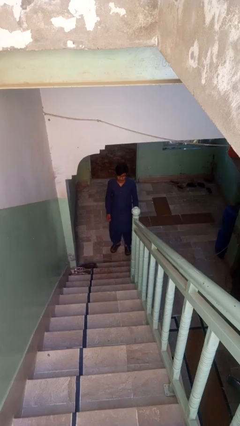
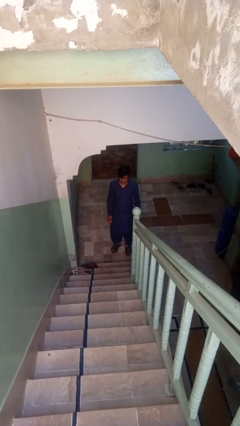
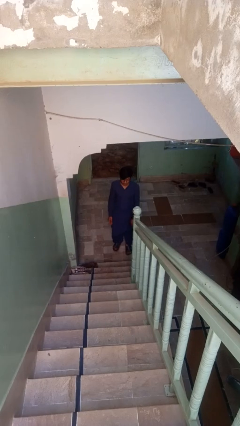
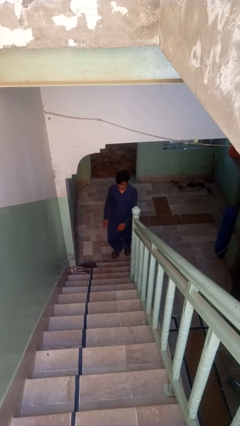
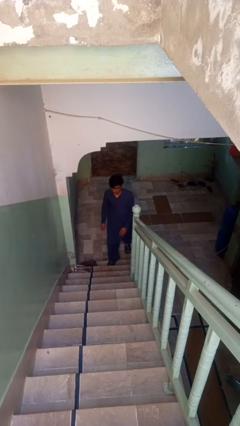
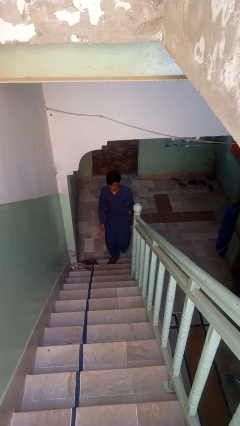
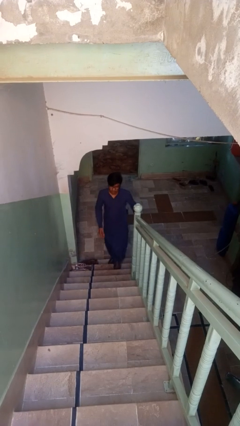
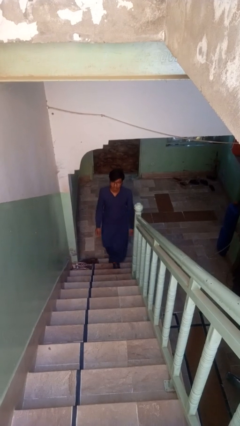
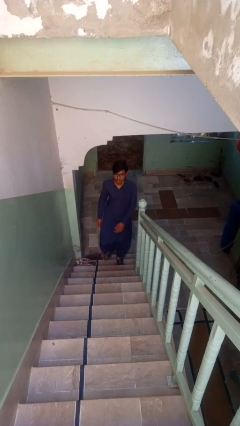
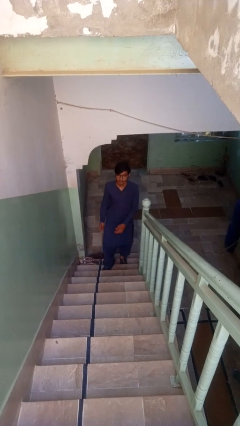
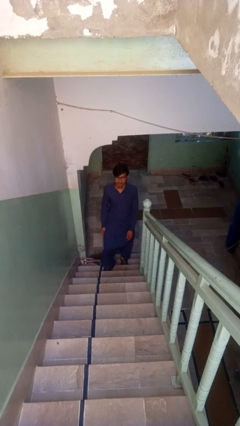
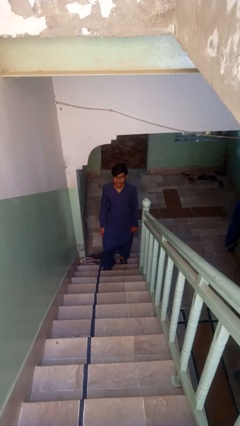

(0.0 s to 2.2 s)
person climbs up stairs

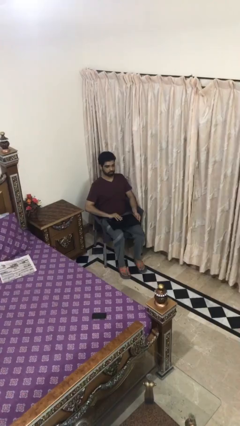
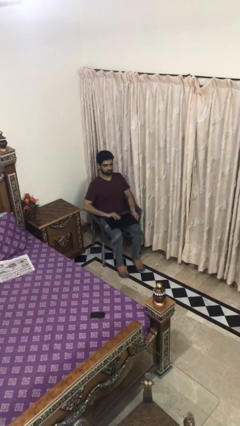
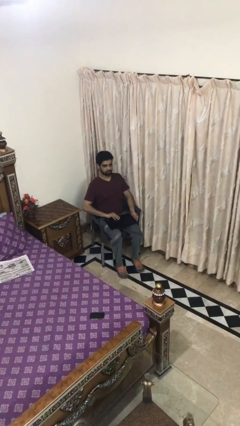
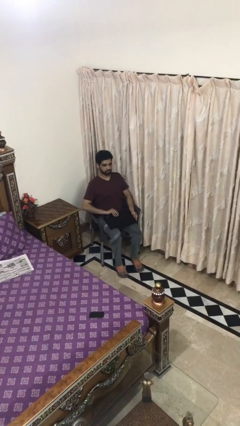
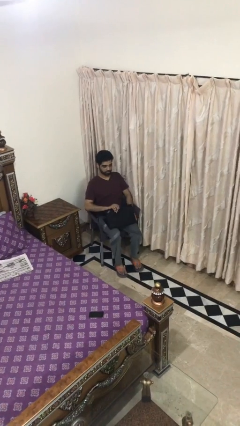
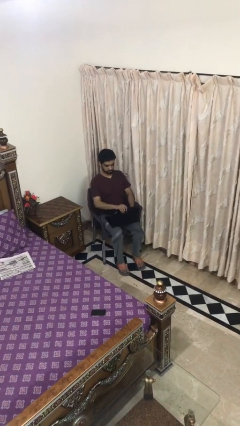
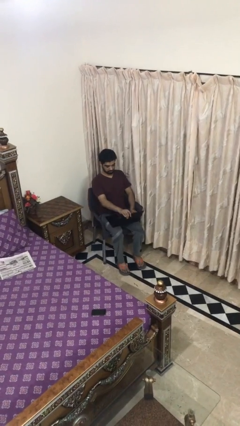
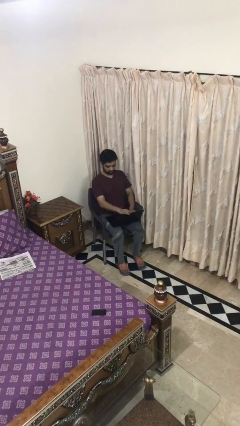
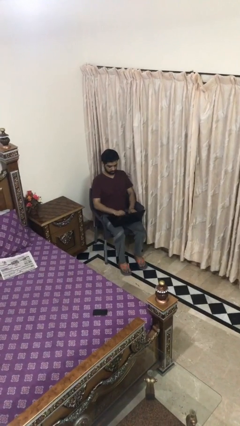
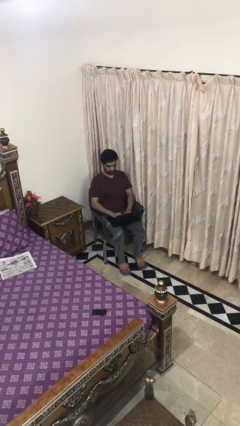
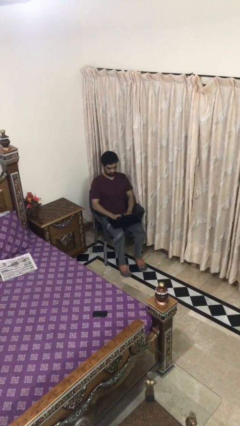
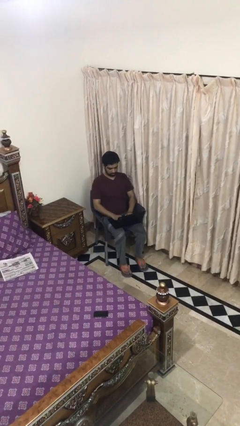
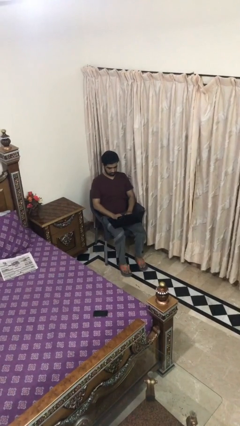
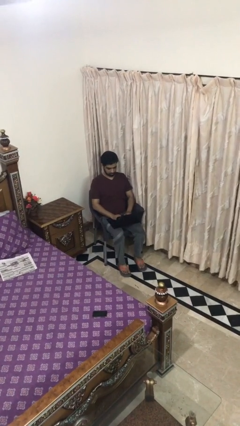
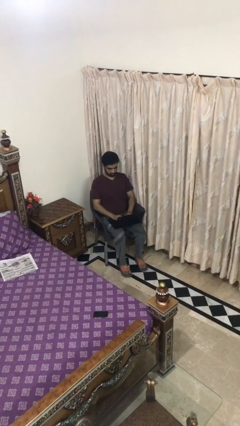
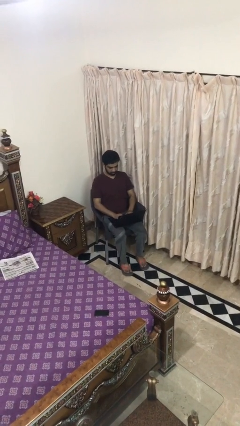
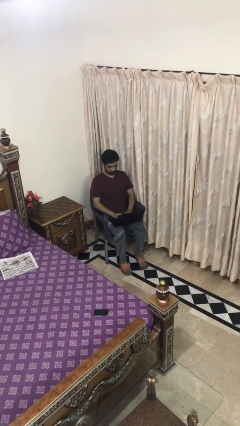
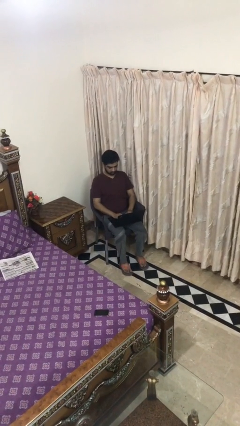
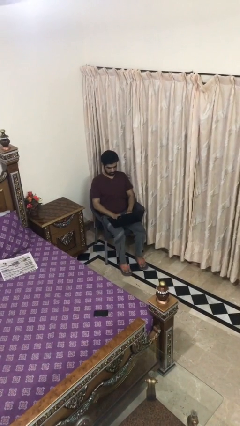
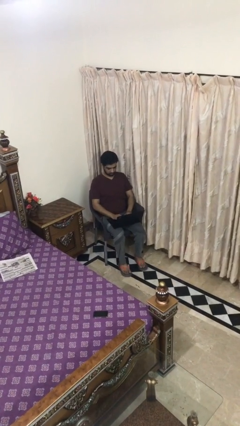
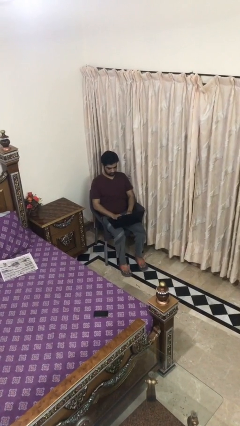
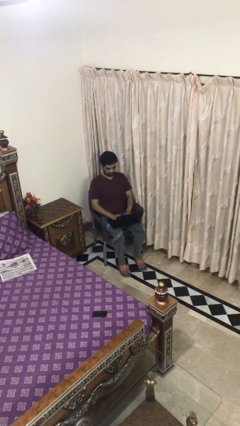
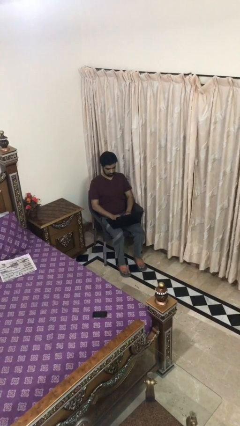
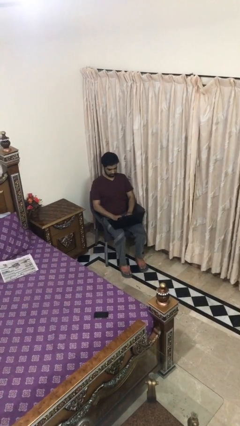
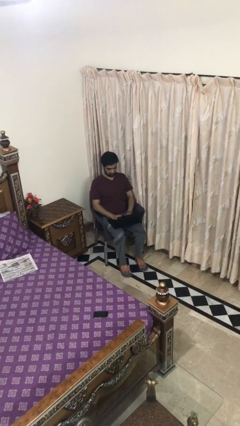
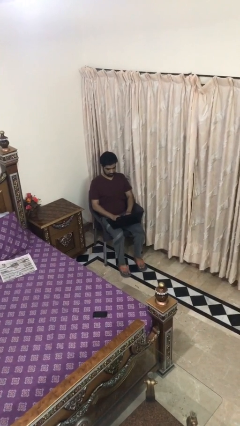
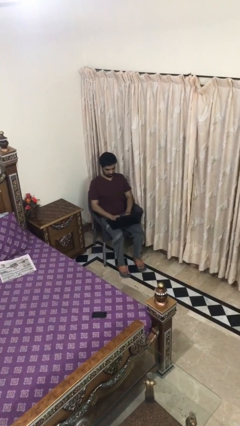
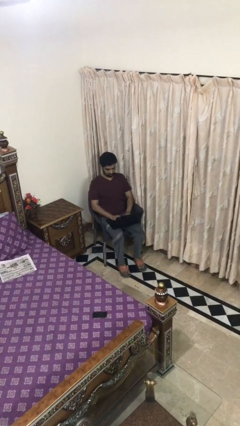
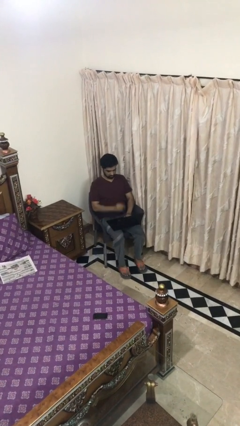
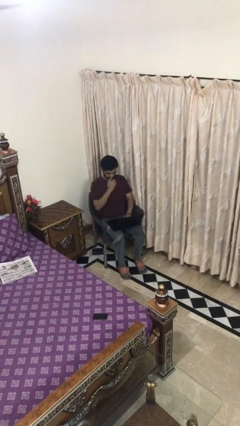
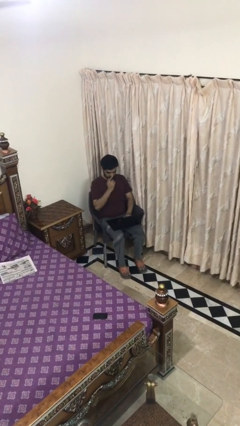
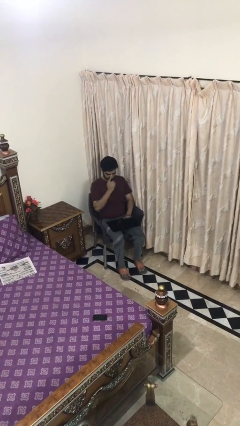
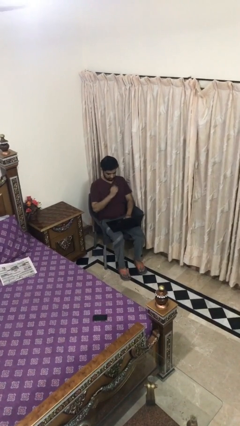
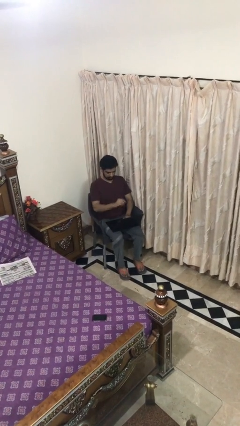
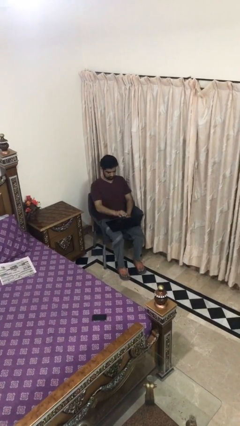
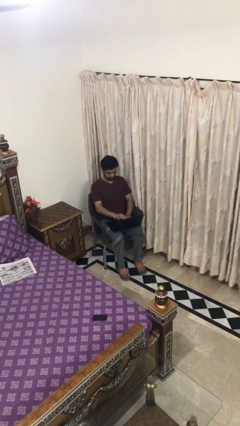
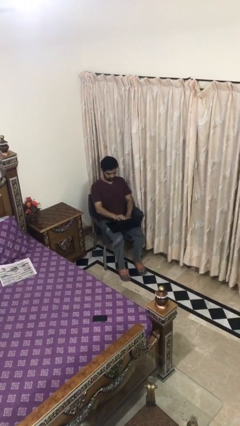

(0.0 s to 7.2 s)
person interacts with laptop

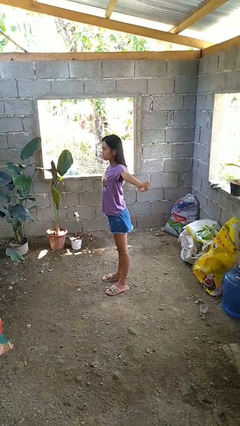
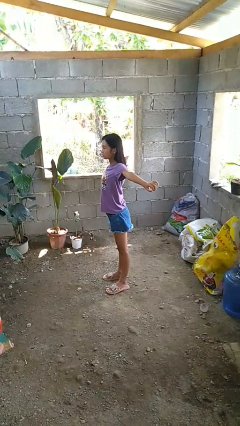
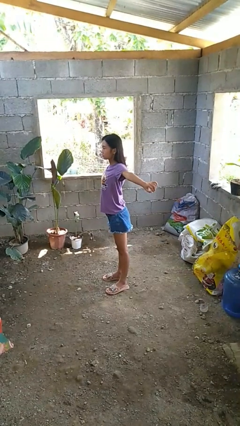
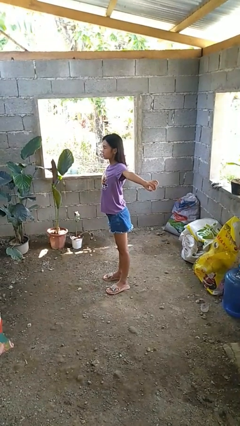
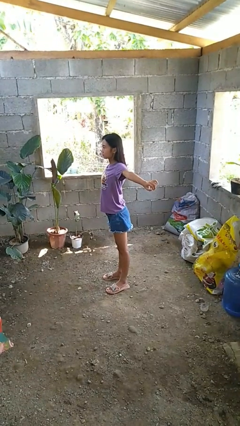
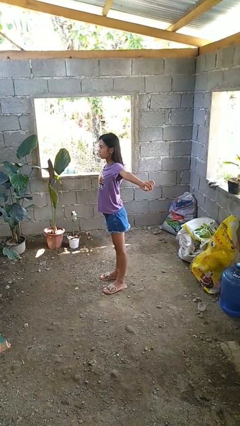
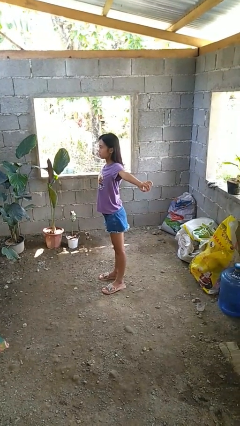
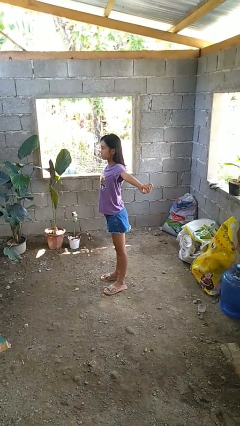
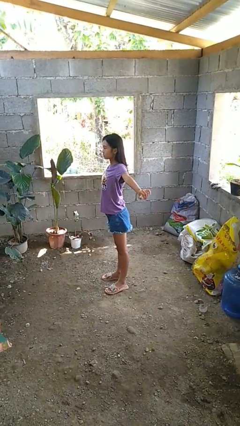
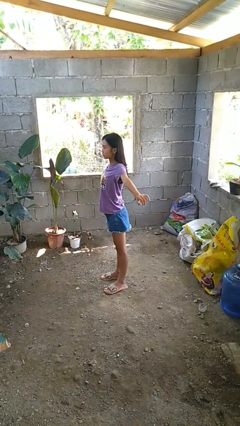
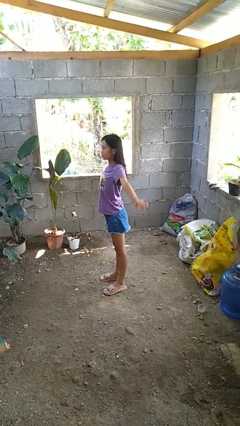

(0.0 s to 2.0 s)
person stretches arms to side

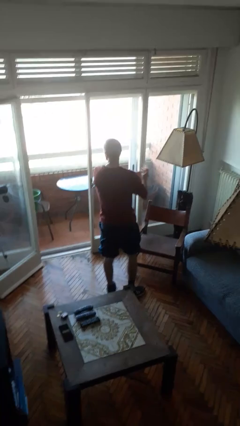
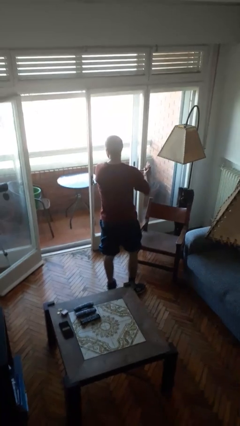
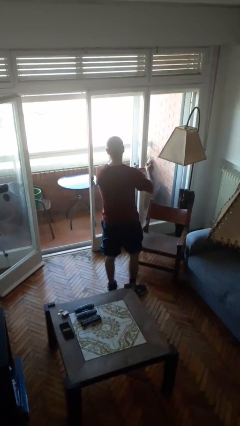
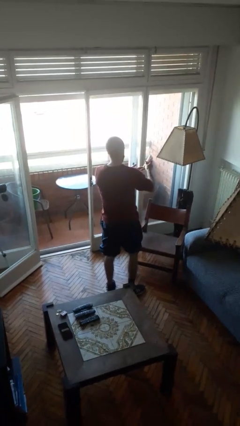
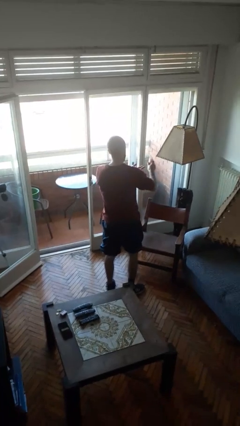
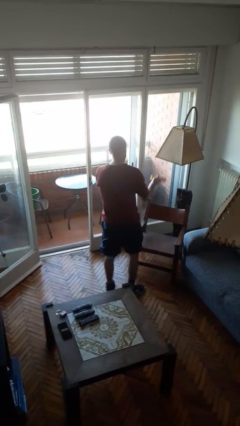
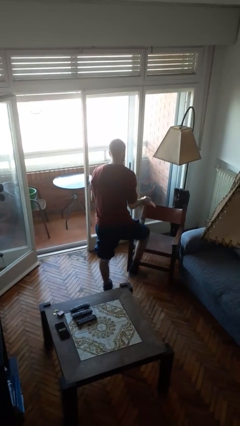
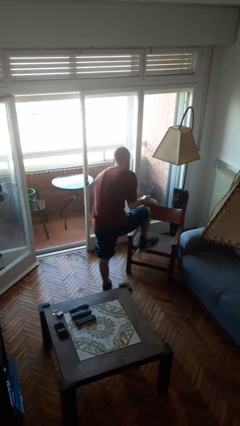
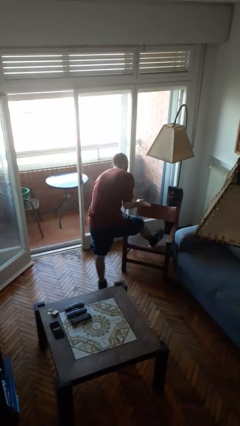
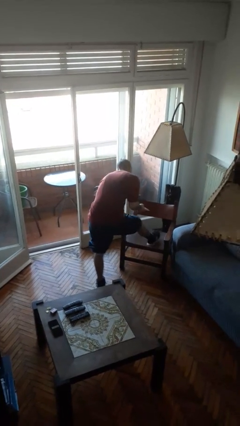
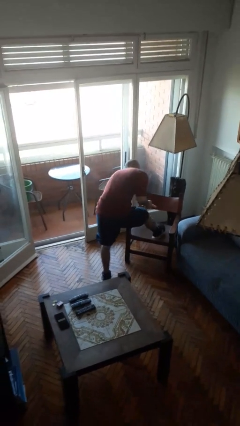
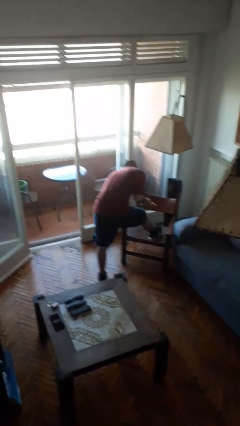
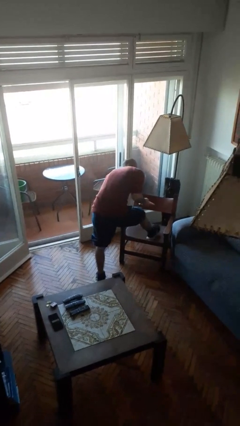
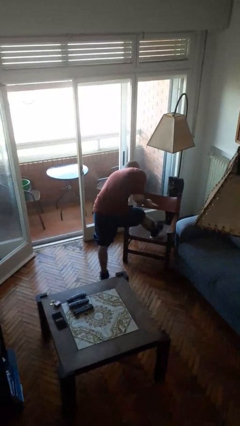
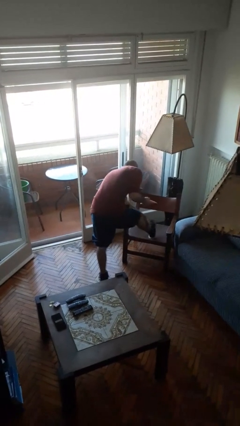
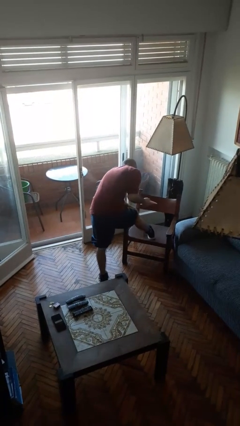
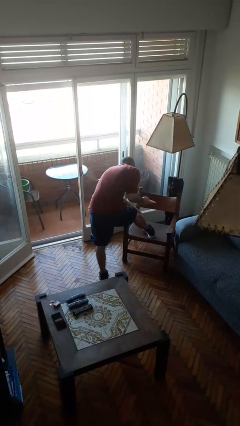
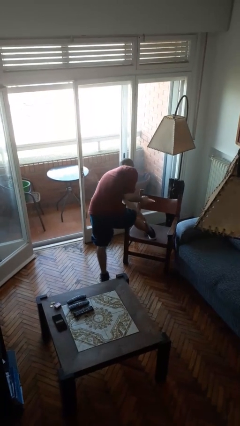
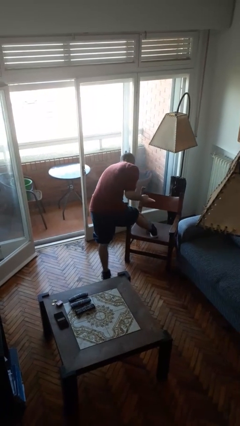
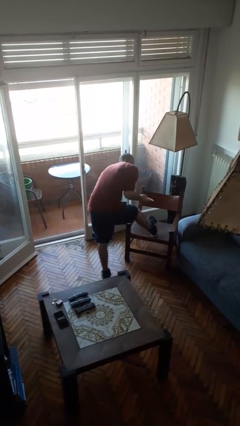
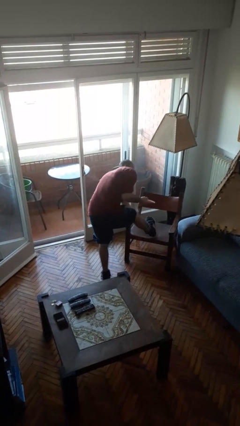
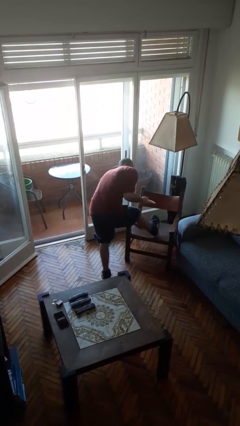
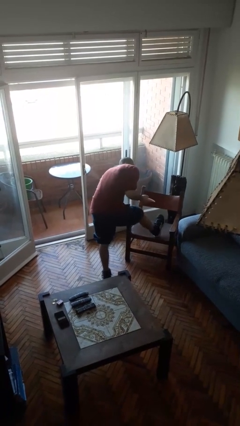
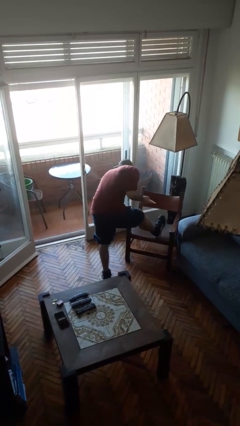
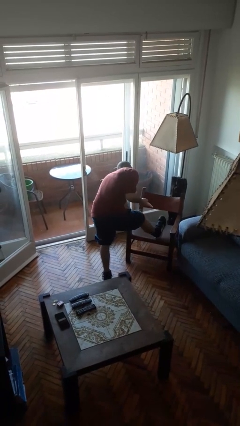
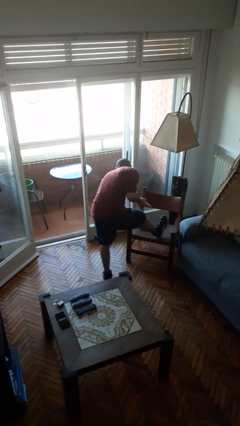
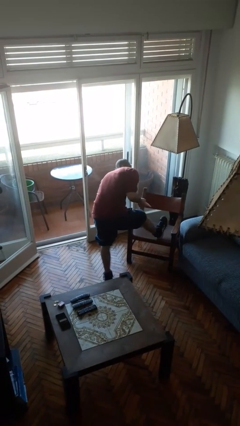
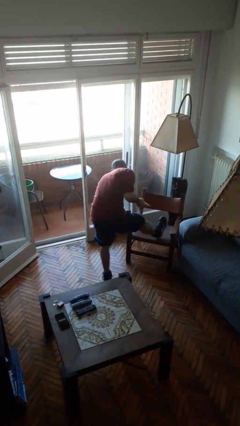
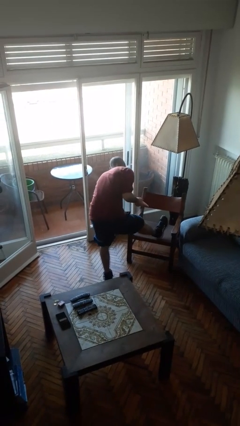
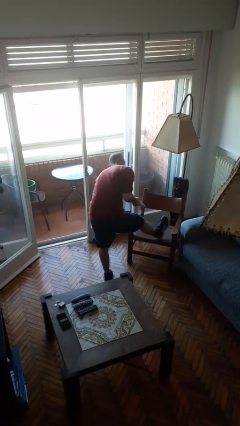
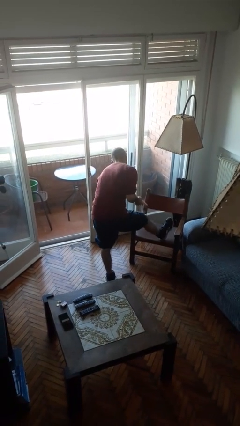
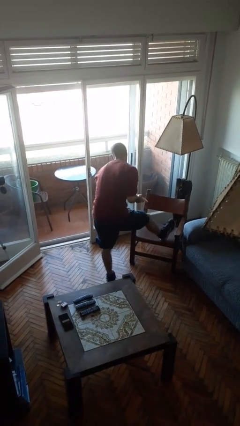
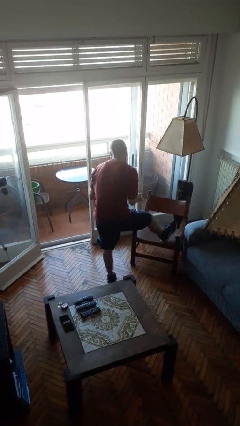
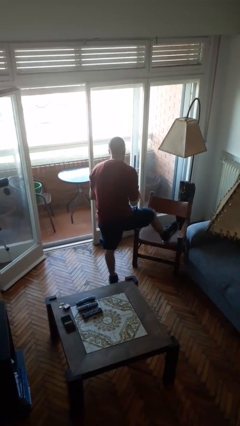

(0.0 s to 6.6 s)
person applies sunscreen

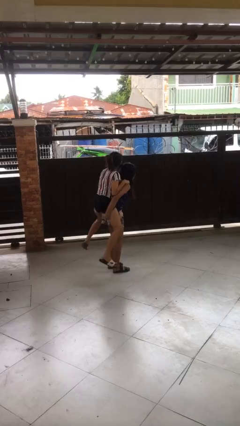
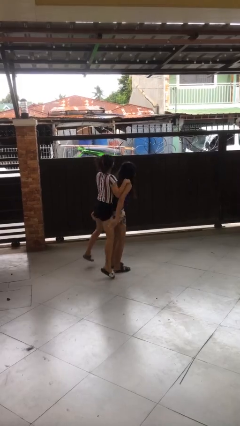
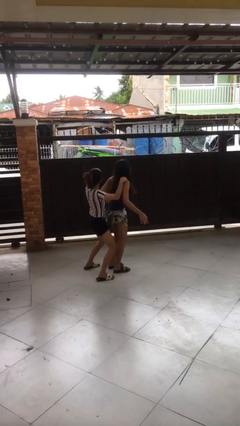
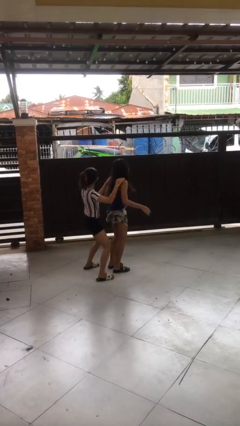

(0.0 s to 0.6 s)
person puts down person
